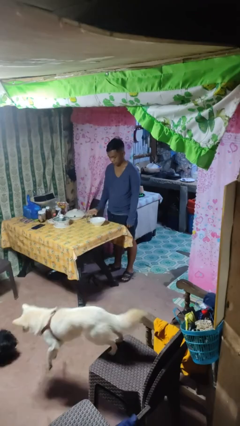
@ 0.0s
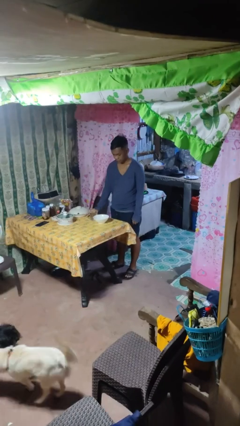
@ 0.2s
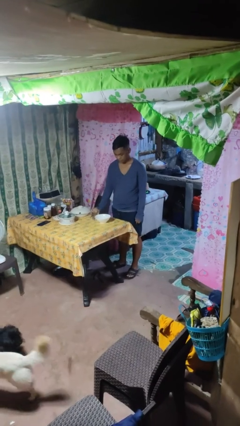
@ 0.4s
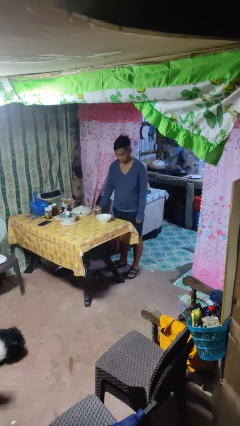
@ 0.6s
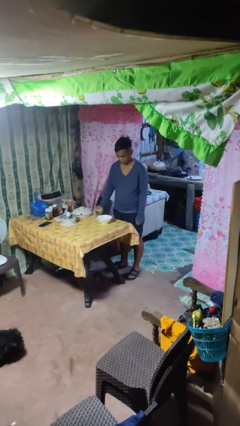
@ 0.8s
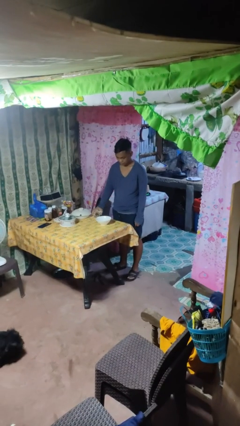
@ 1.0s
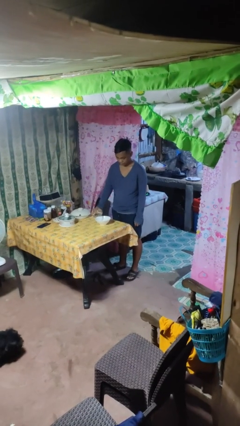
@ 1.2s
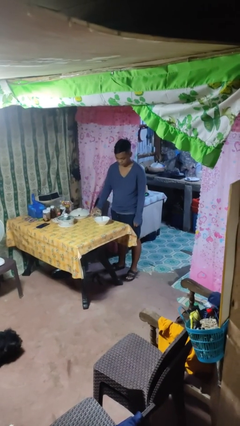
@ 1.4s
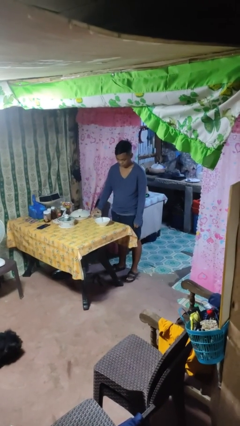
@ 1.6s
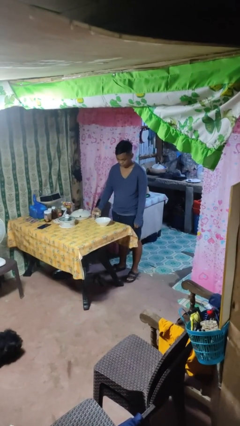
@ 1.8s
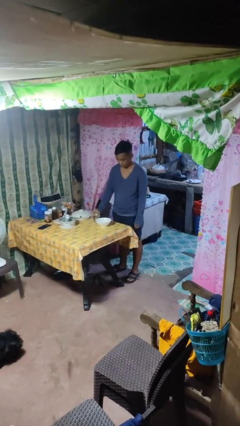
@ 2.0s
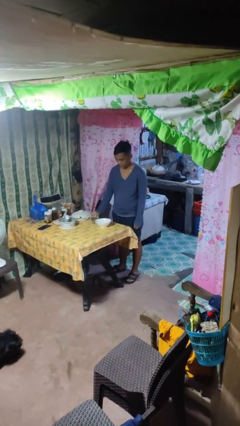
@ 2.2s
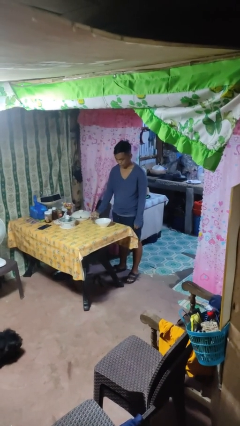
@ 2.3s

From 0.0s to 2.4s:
person pours into bowl

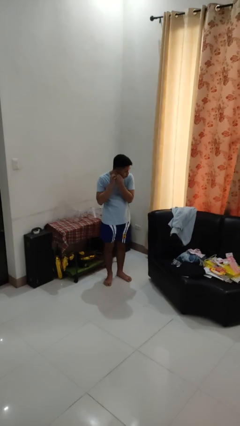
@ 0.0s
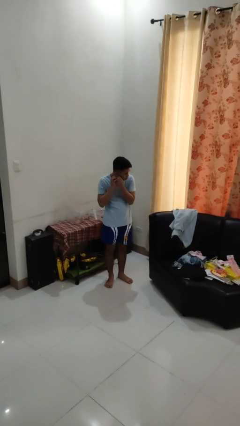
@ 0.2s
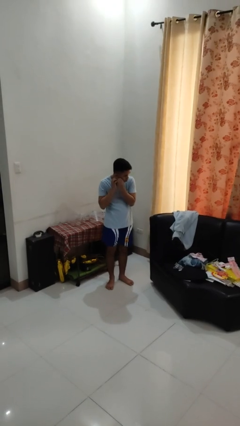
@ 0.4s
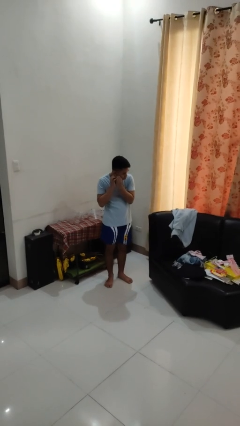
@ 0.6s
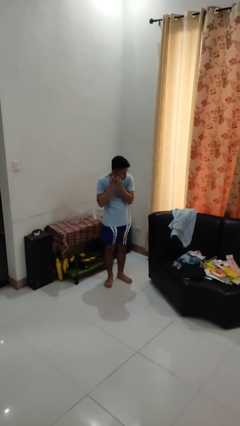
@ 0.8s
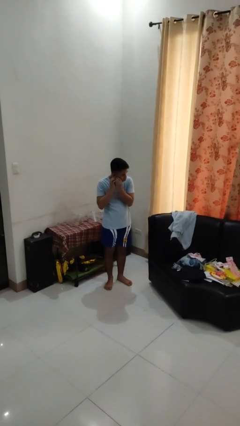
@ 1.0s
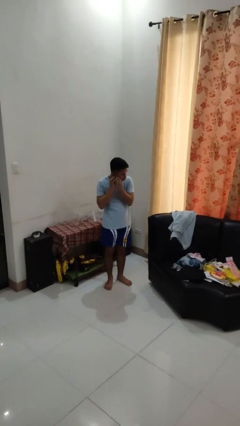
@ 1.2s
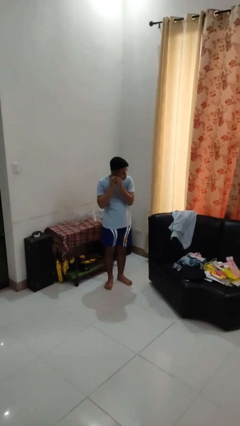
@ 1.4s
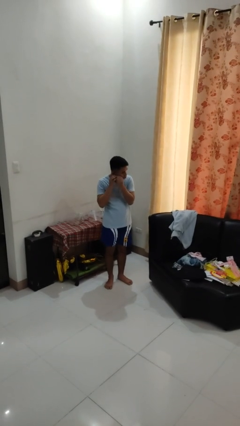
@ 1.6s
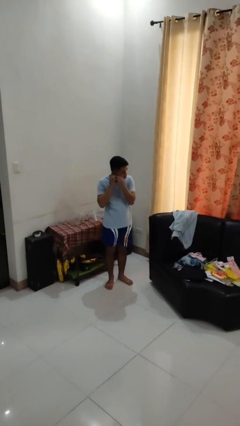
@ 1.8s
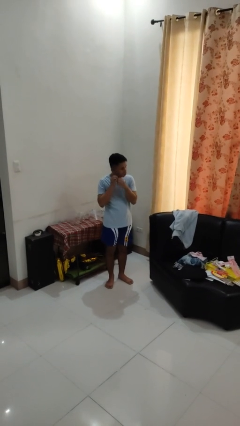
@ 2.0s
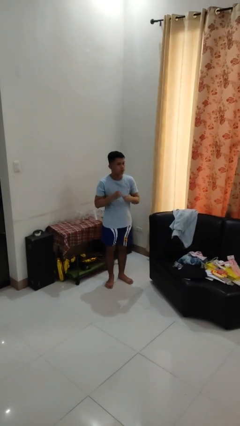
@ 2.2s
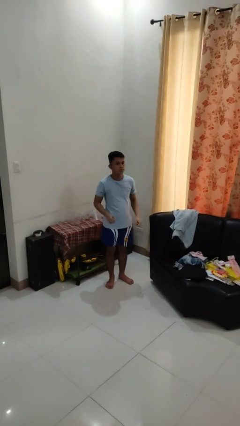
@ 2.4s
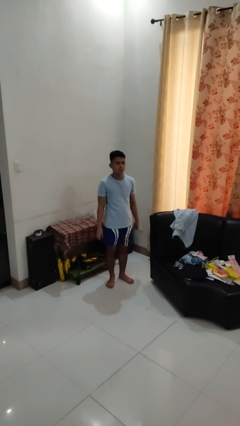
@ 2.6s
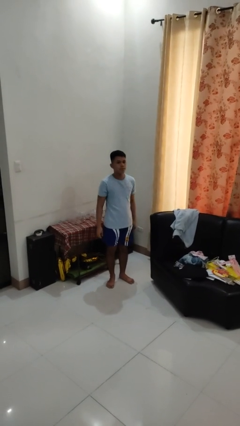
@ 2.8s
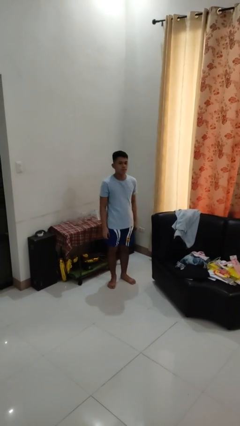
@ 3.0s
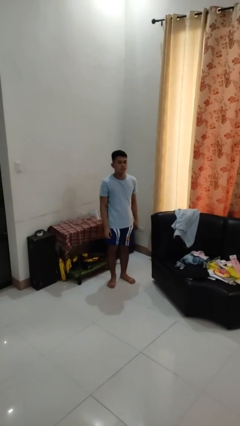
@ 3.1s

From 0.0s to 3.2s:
person puts on earrings

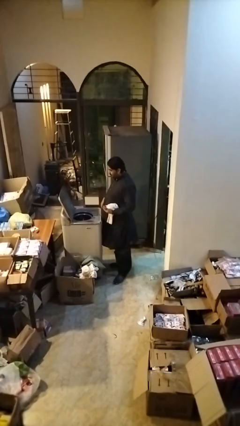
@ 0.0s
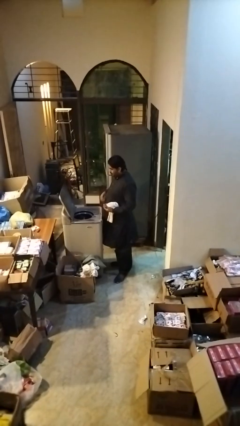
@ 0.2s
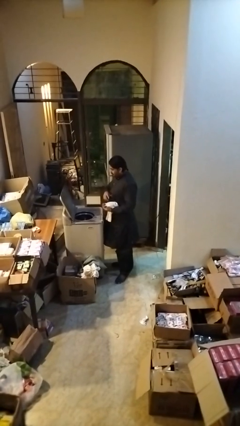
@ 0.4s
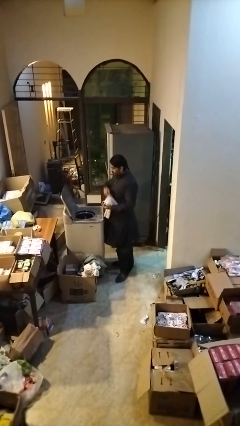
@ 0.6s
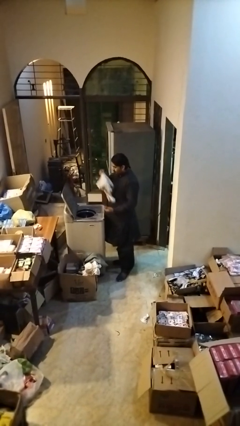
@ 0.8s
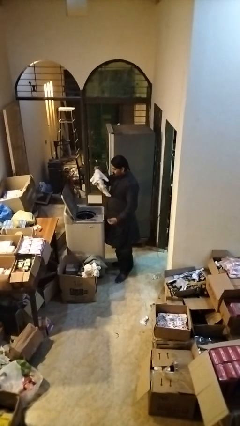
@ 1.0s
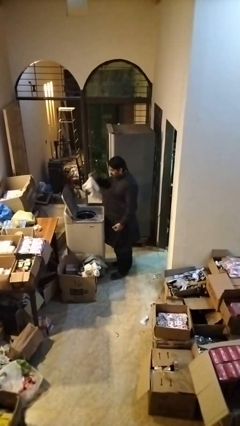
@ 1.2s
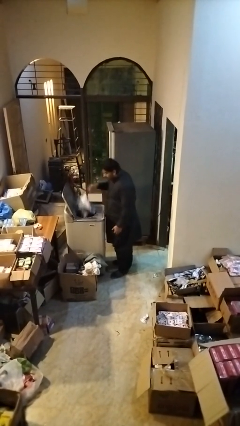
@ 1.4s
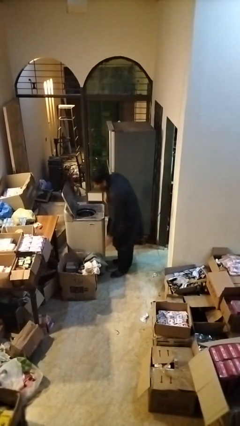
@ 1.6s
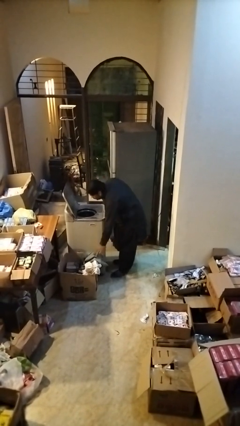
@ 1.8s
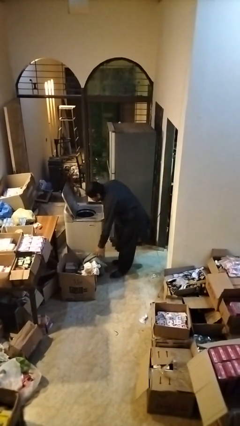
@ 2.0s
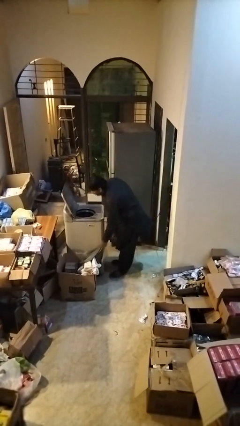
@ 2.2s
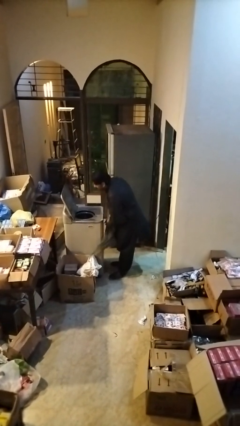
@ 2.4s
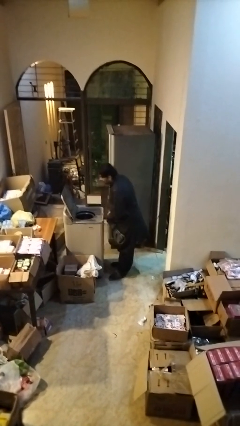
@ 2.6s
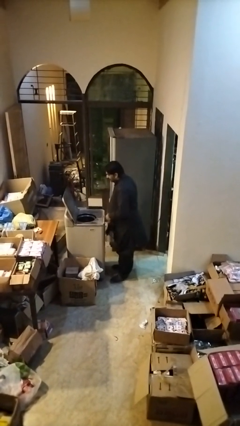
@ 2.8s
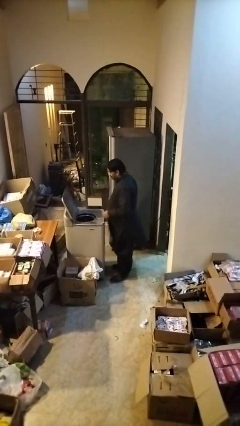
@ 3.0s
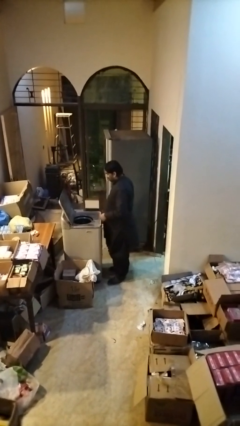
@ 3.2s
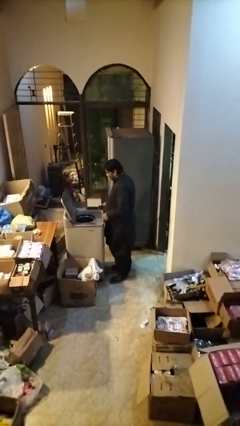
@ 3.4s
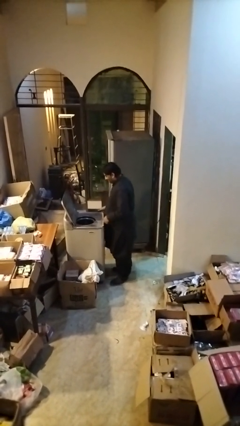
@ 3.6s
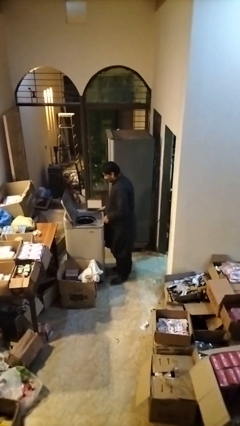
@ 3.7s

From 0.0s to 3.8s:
person loads dryer

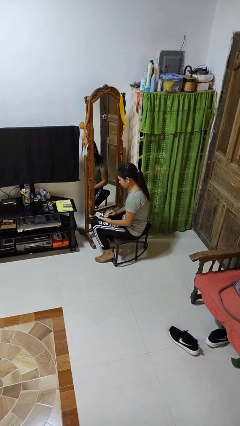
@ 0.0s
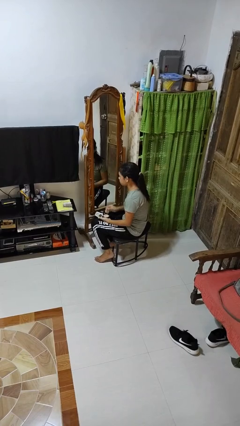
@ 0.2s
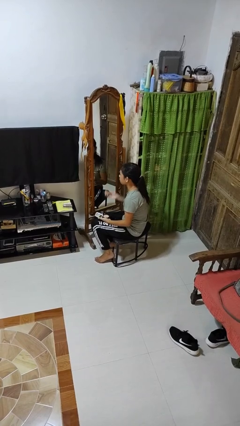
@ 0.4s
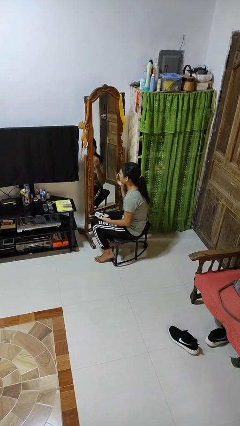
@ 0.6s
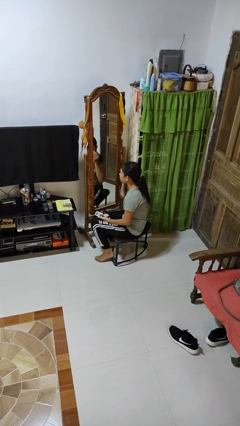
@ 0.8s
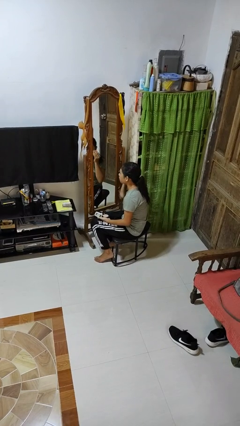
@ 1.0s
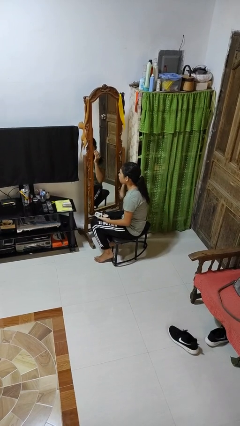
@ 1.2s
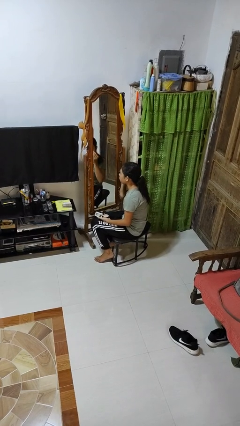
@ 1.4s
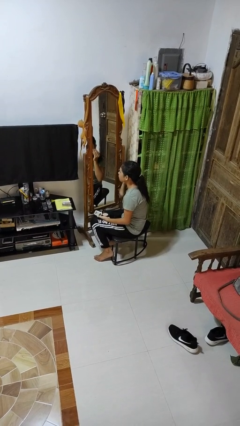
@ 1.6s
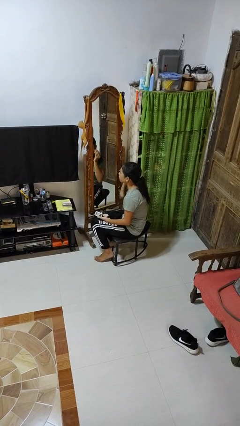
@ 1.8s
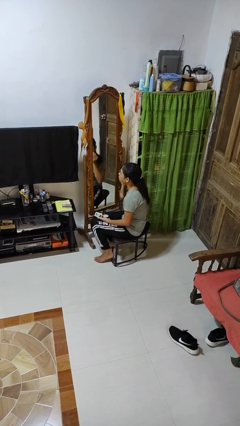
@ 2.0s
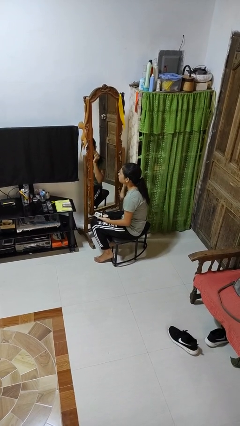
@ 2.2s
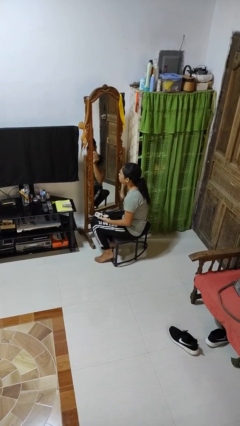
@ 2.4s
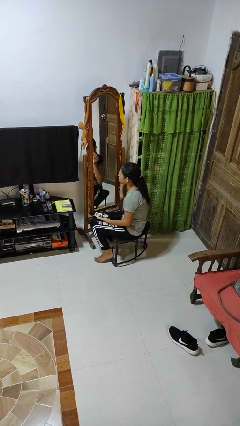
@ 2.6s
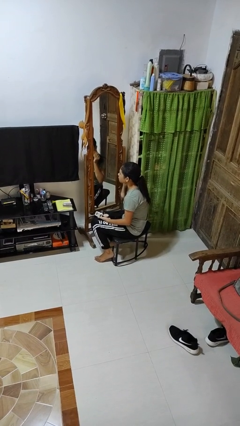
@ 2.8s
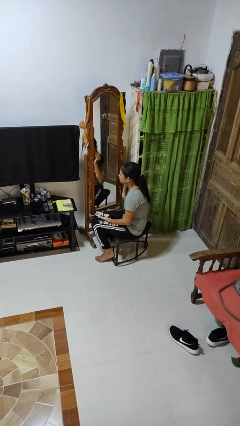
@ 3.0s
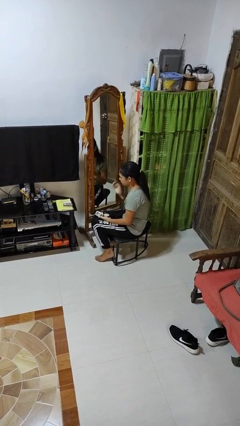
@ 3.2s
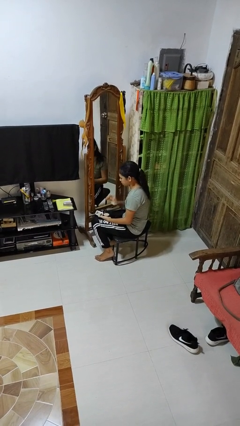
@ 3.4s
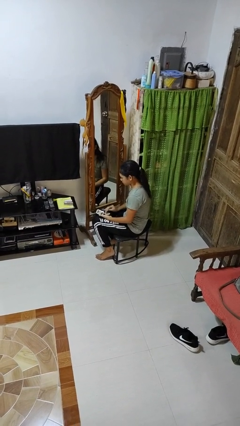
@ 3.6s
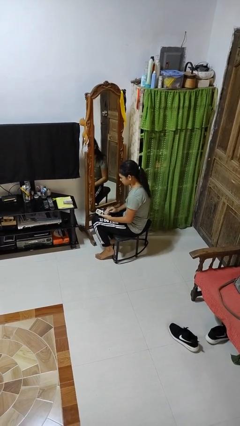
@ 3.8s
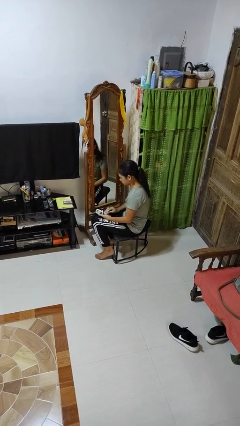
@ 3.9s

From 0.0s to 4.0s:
person applies foundation makeup

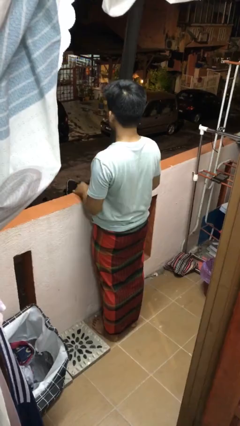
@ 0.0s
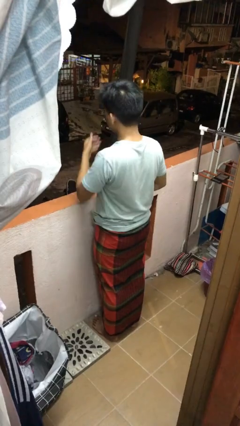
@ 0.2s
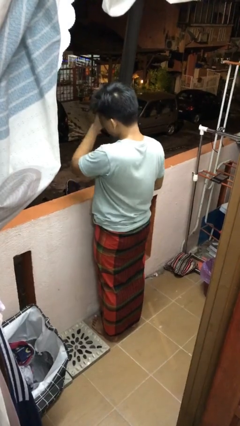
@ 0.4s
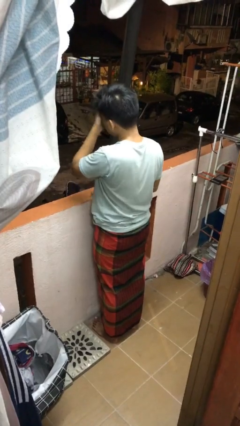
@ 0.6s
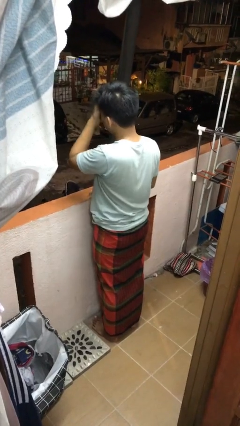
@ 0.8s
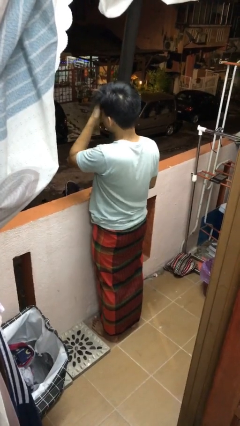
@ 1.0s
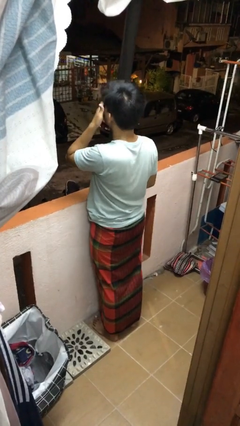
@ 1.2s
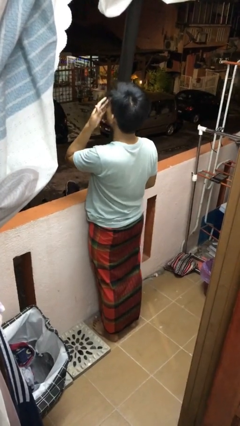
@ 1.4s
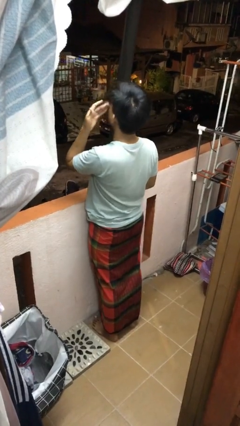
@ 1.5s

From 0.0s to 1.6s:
person rubs eyes

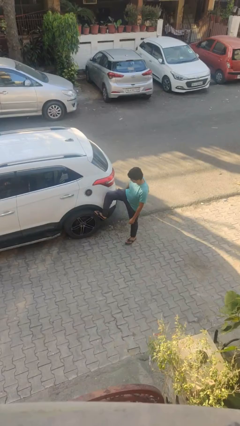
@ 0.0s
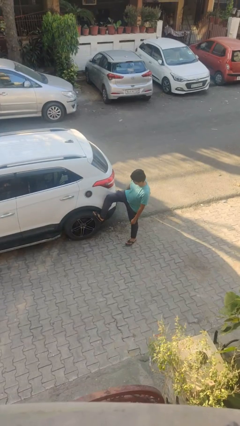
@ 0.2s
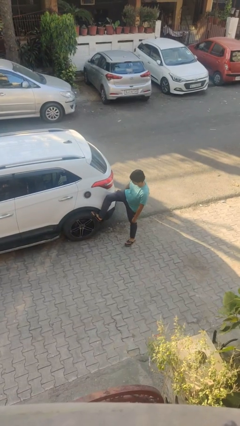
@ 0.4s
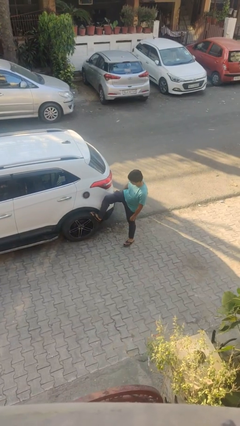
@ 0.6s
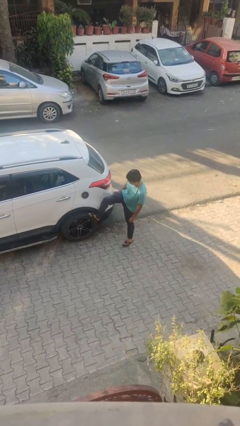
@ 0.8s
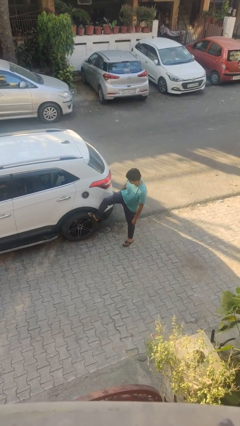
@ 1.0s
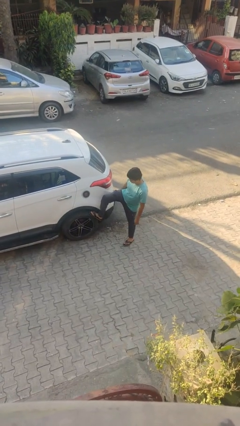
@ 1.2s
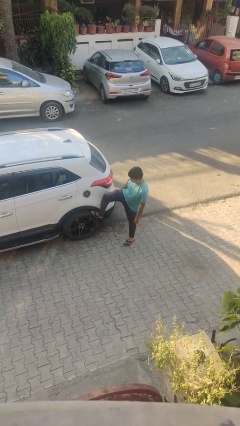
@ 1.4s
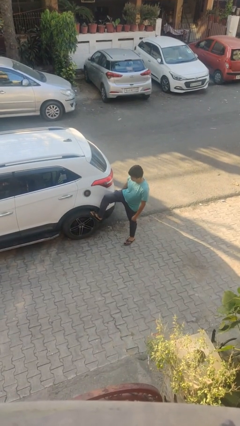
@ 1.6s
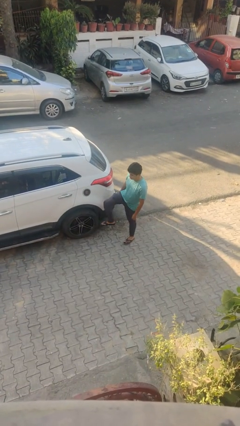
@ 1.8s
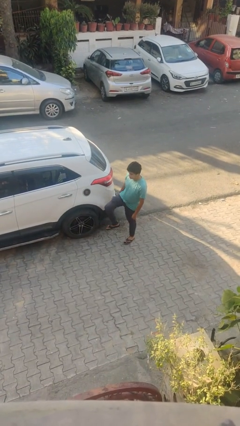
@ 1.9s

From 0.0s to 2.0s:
person kicks car tires
